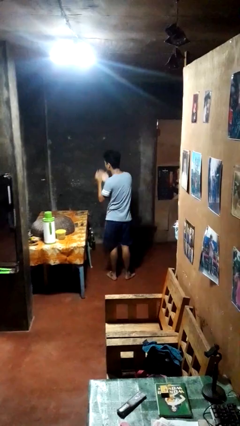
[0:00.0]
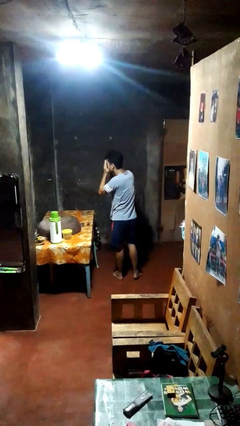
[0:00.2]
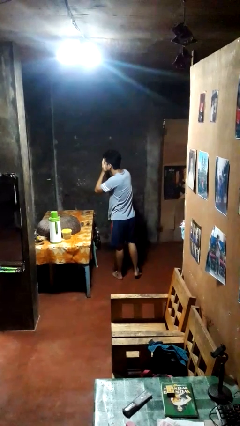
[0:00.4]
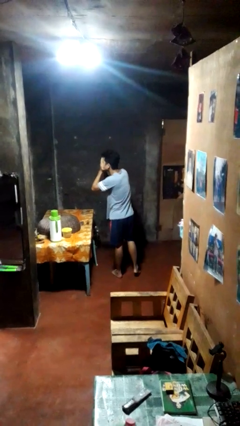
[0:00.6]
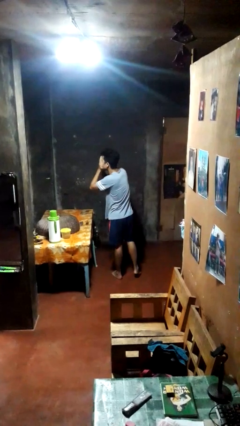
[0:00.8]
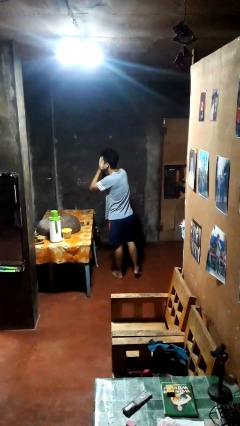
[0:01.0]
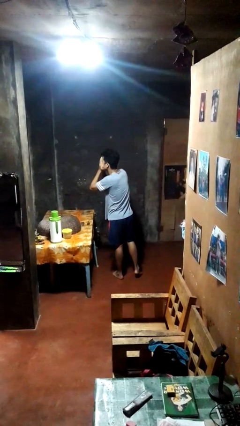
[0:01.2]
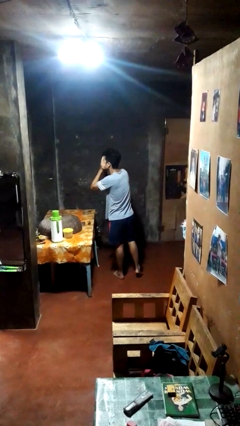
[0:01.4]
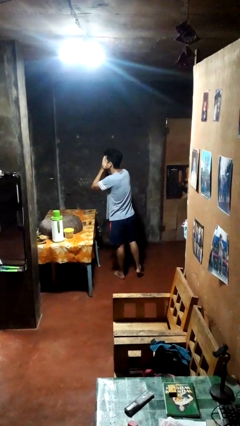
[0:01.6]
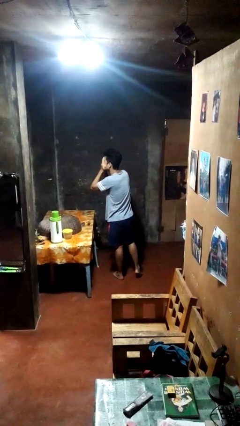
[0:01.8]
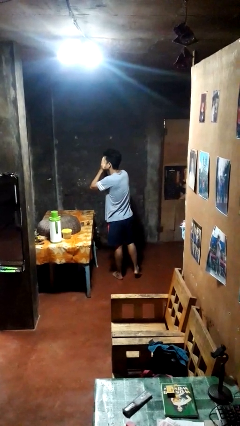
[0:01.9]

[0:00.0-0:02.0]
person covers face with hands

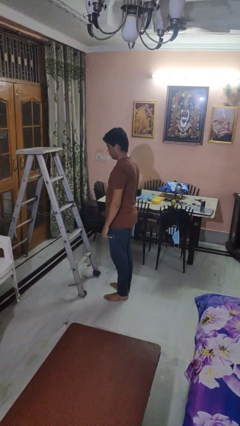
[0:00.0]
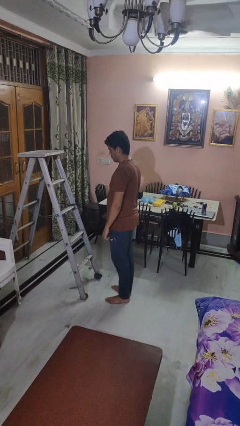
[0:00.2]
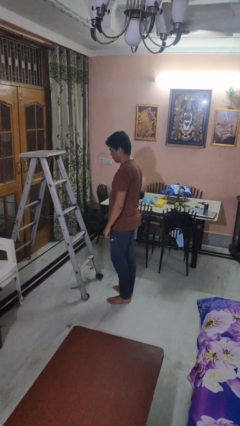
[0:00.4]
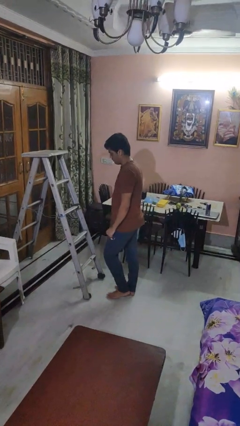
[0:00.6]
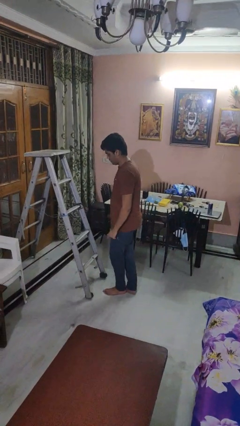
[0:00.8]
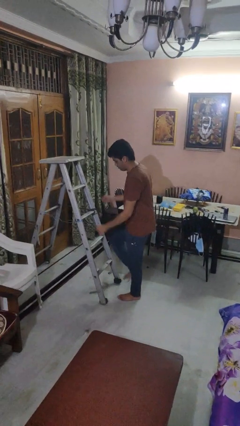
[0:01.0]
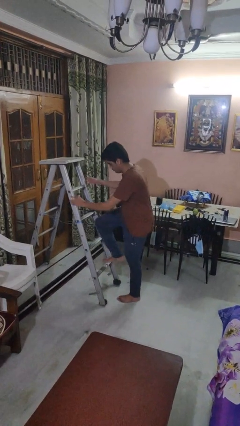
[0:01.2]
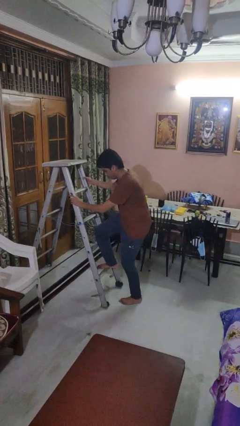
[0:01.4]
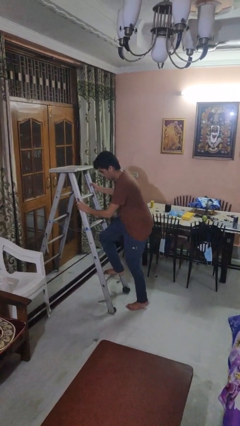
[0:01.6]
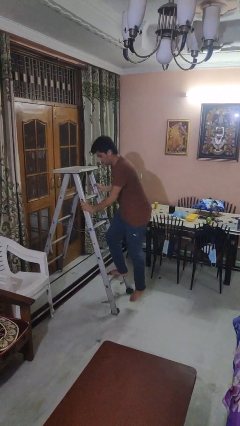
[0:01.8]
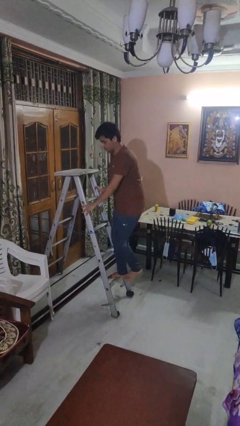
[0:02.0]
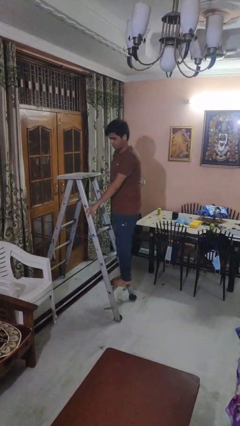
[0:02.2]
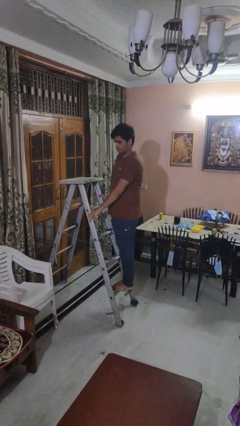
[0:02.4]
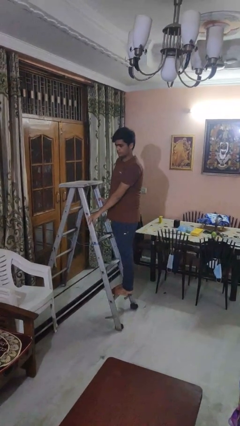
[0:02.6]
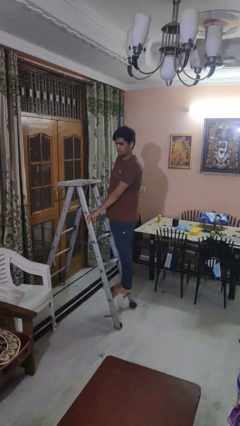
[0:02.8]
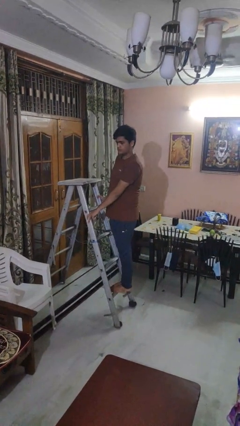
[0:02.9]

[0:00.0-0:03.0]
person climbs up ladder

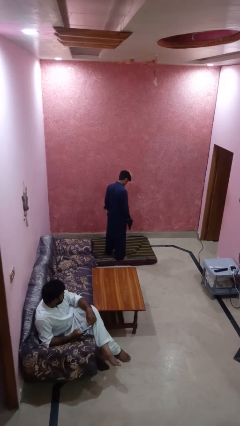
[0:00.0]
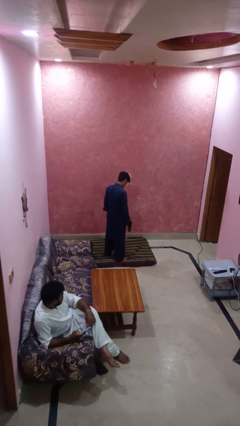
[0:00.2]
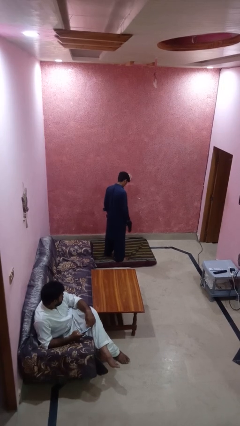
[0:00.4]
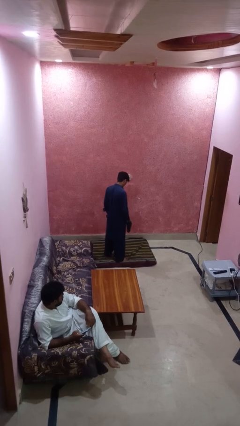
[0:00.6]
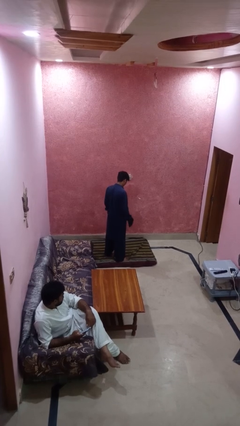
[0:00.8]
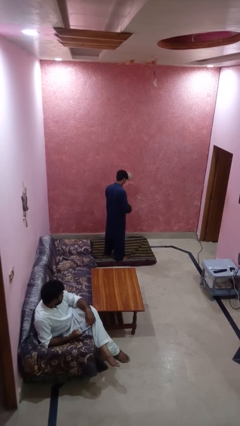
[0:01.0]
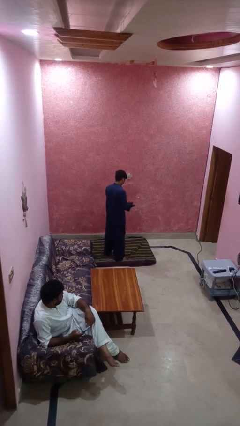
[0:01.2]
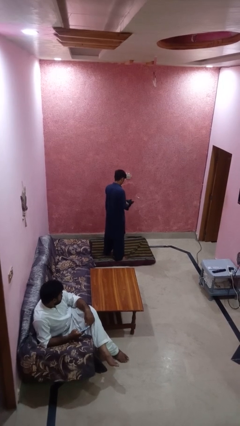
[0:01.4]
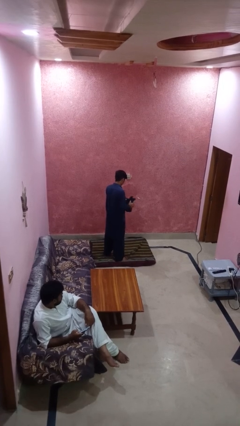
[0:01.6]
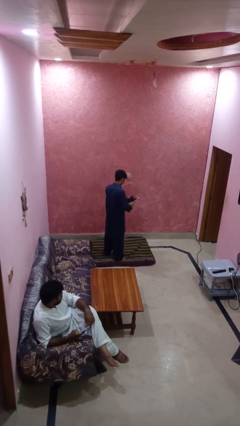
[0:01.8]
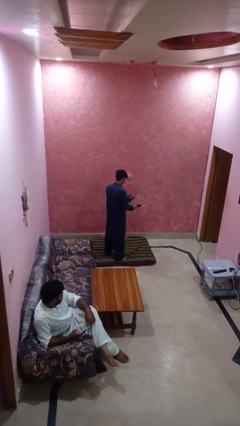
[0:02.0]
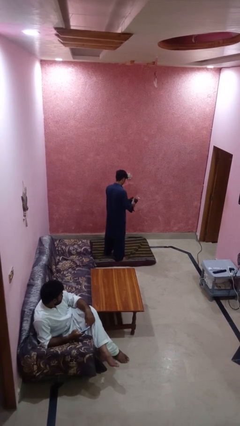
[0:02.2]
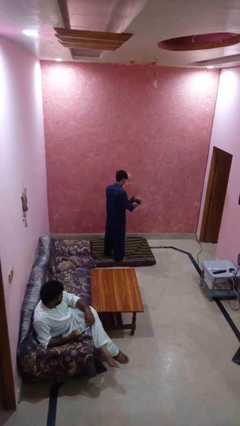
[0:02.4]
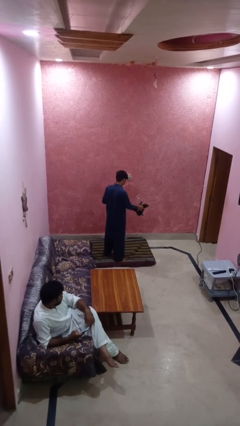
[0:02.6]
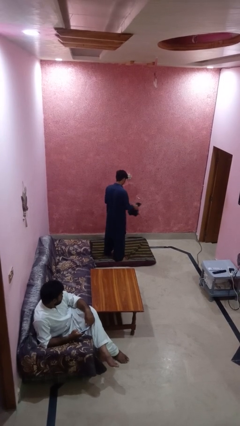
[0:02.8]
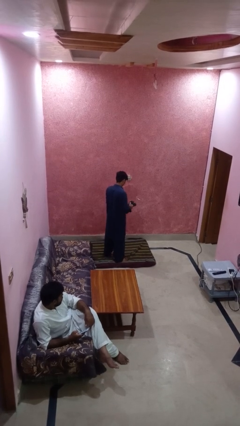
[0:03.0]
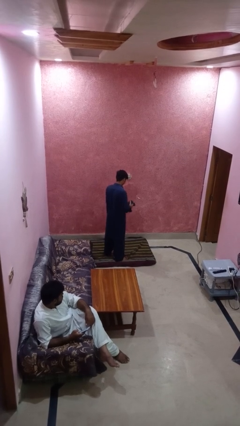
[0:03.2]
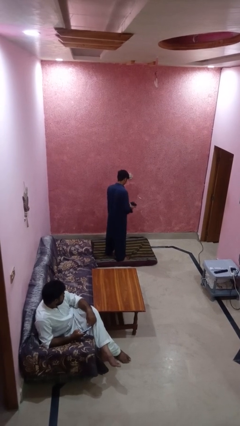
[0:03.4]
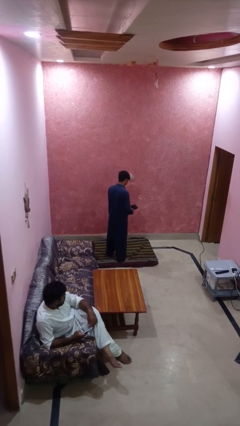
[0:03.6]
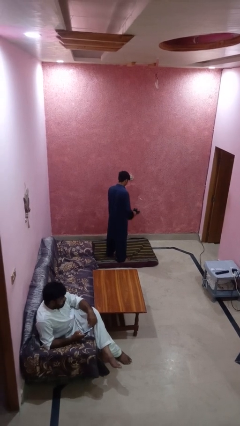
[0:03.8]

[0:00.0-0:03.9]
person takes off gloves

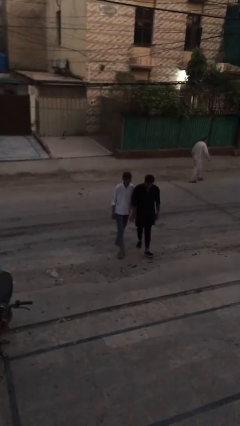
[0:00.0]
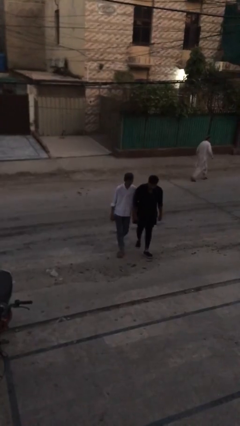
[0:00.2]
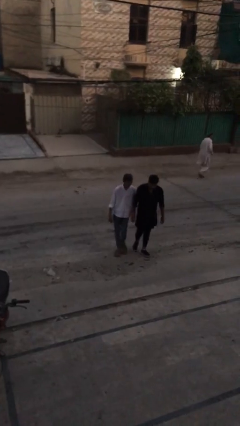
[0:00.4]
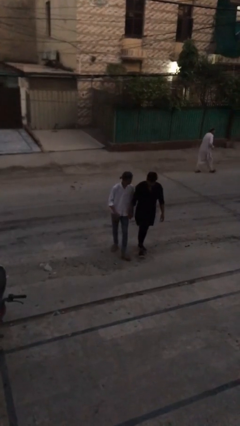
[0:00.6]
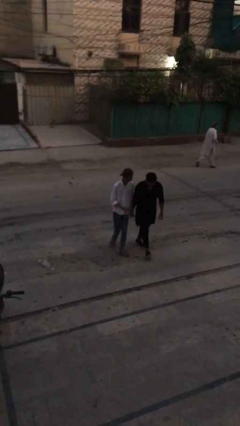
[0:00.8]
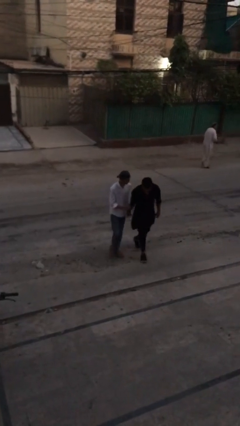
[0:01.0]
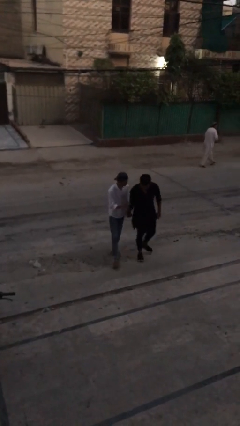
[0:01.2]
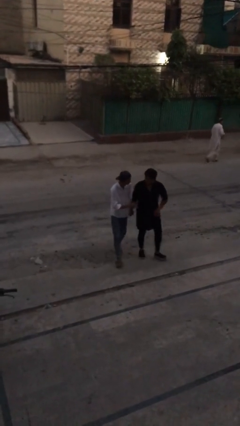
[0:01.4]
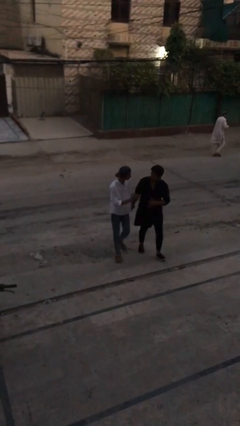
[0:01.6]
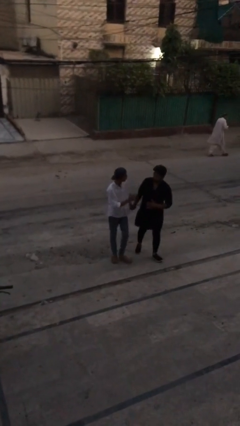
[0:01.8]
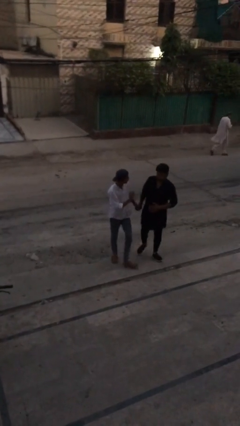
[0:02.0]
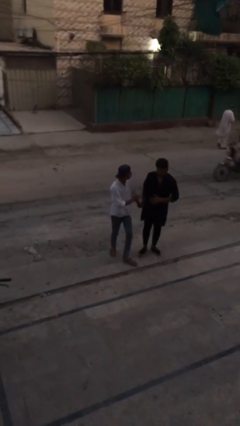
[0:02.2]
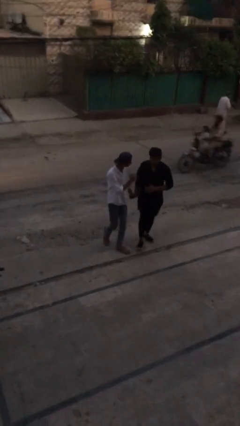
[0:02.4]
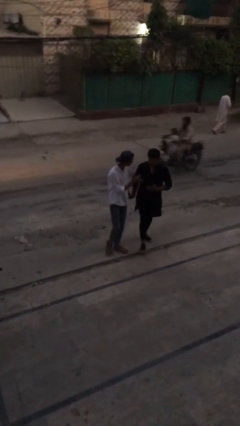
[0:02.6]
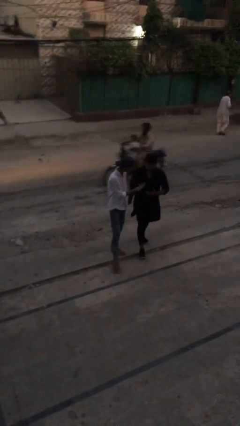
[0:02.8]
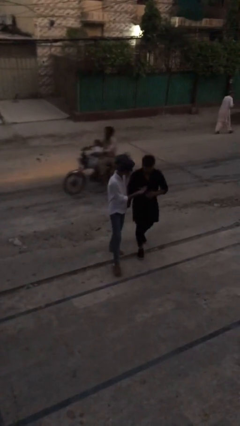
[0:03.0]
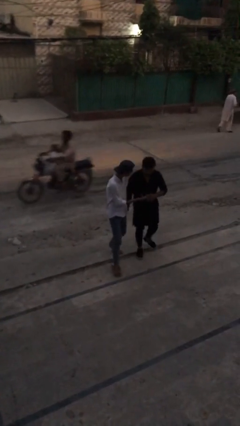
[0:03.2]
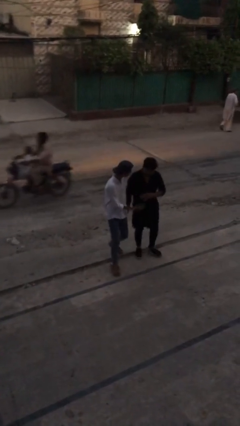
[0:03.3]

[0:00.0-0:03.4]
person holds hand

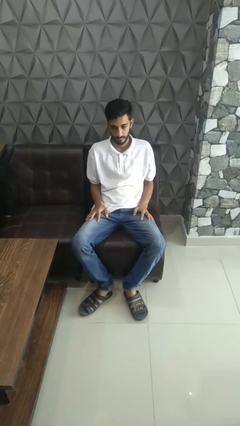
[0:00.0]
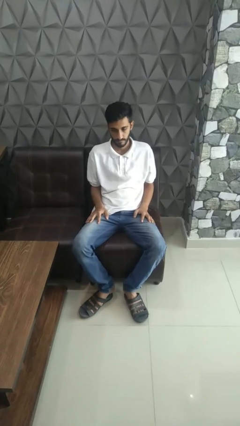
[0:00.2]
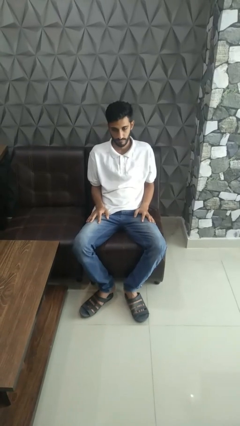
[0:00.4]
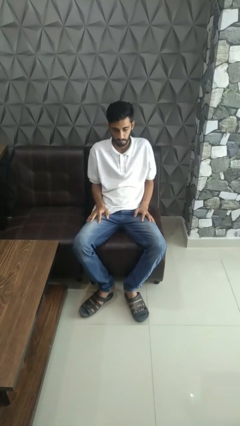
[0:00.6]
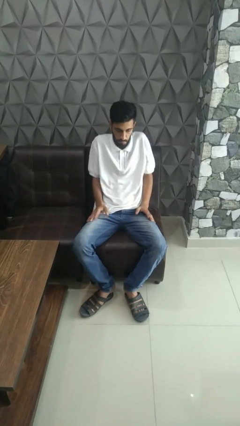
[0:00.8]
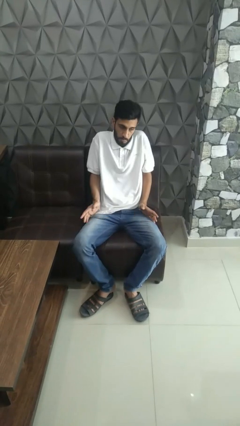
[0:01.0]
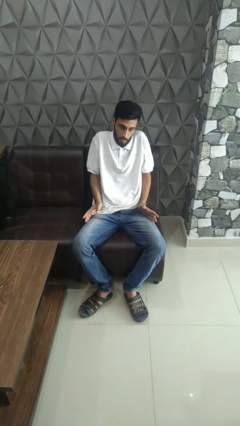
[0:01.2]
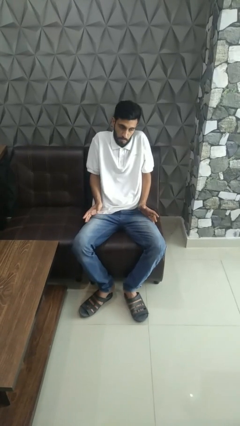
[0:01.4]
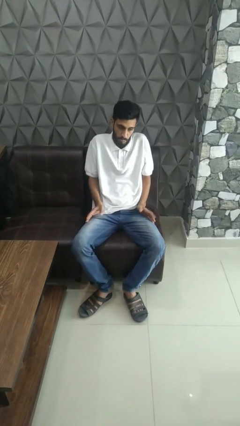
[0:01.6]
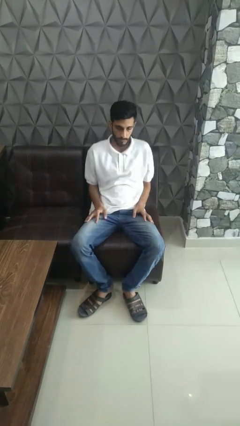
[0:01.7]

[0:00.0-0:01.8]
person shrugs

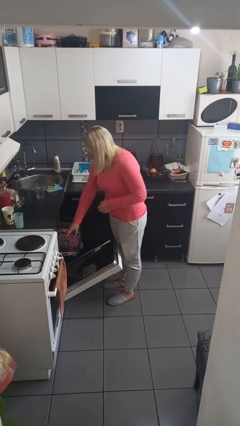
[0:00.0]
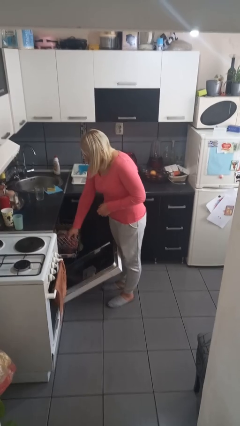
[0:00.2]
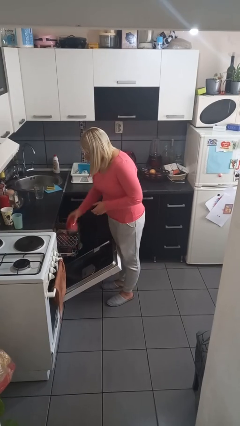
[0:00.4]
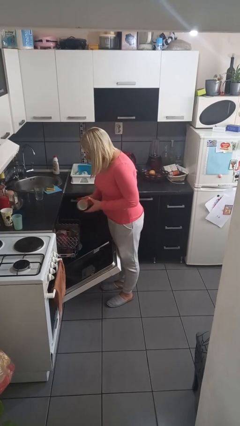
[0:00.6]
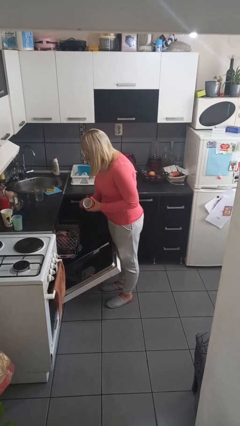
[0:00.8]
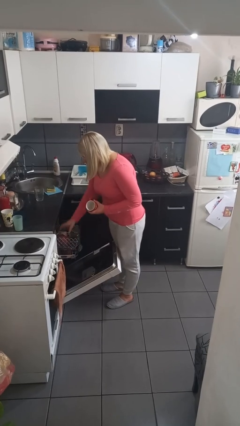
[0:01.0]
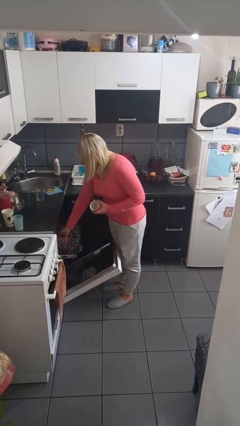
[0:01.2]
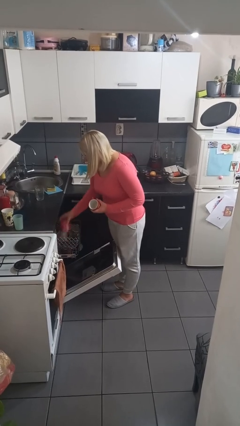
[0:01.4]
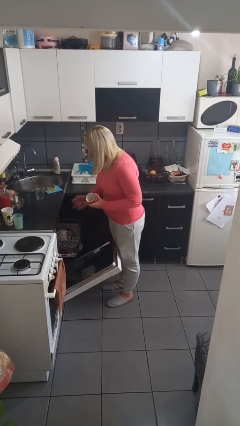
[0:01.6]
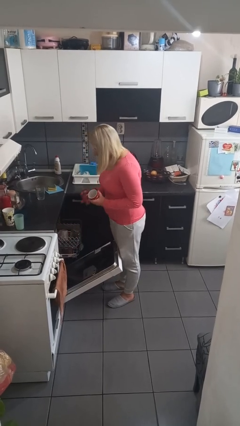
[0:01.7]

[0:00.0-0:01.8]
person unloads dishwasher

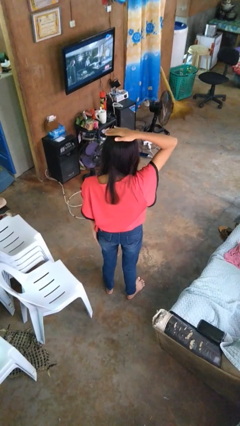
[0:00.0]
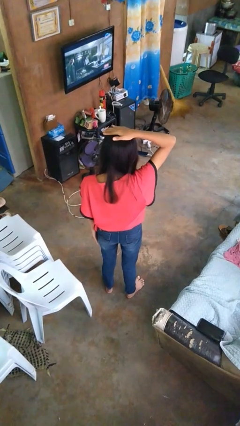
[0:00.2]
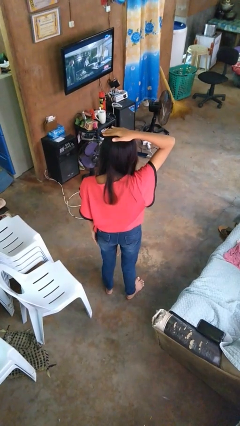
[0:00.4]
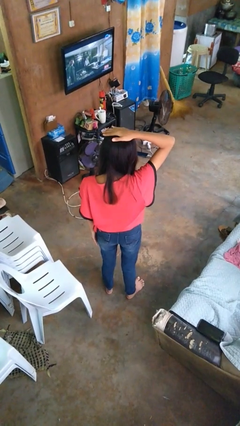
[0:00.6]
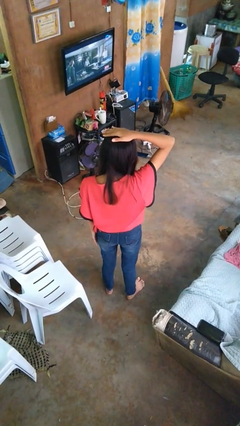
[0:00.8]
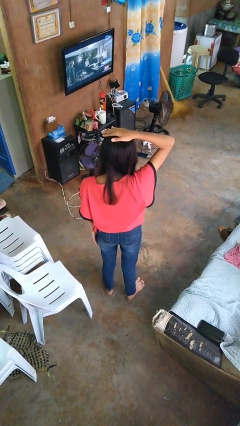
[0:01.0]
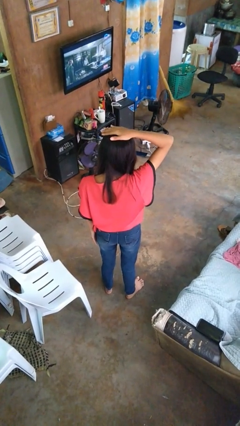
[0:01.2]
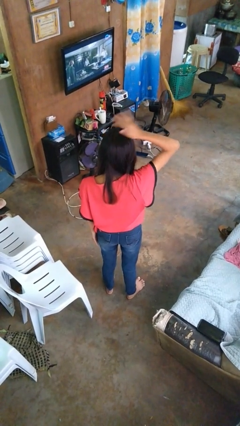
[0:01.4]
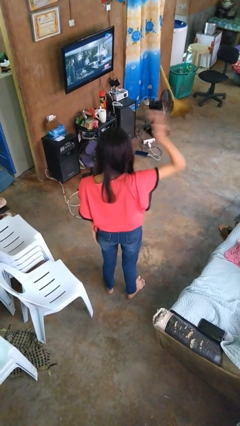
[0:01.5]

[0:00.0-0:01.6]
person pats head

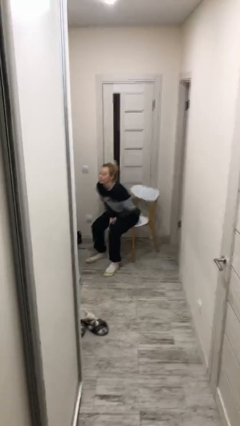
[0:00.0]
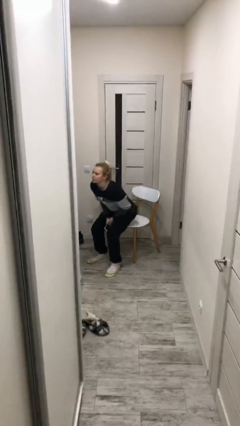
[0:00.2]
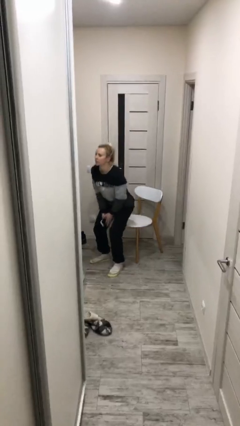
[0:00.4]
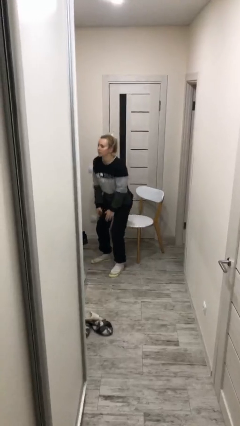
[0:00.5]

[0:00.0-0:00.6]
person stands up